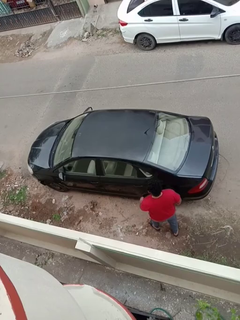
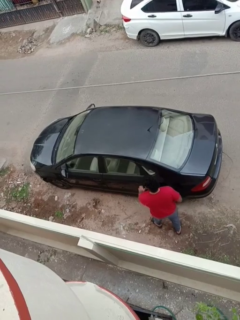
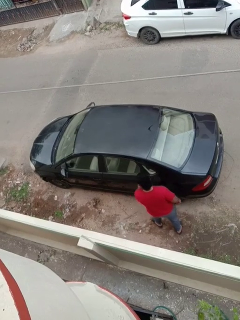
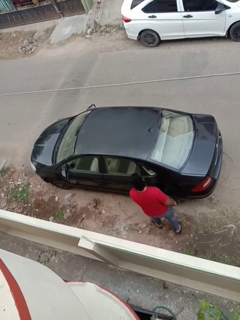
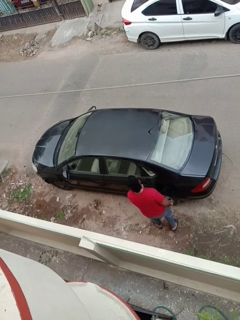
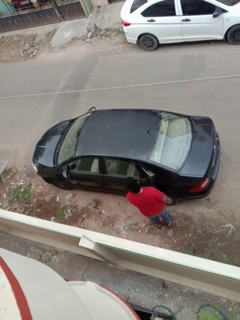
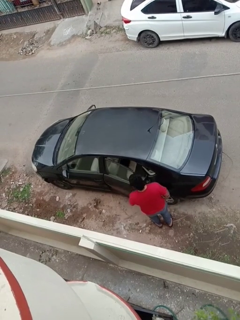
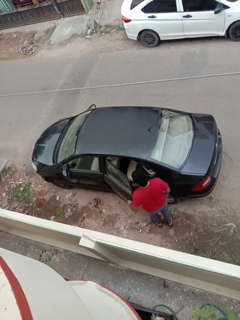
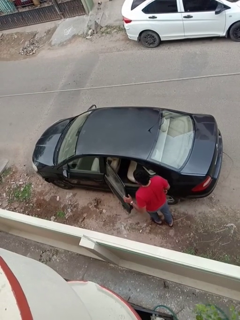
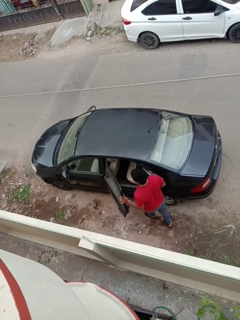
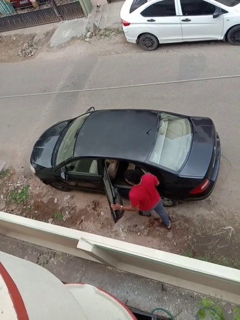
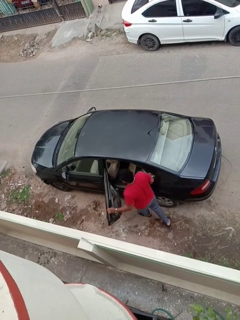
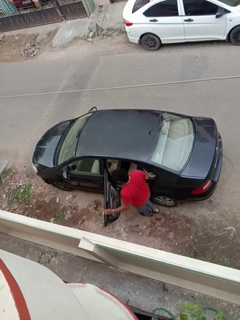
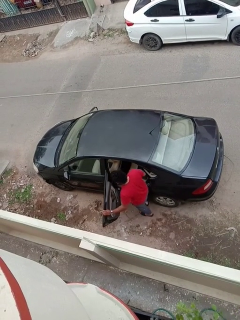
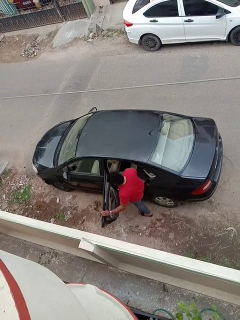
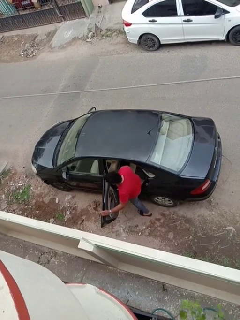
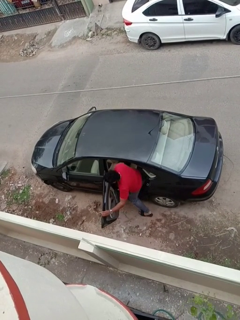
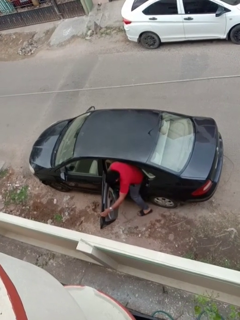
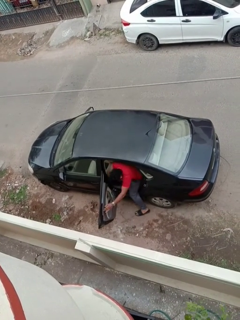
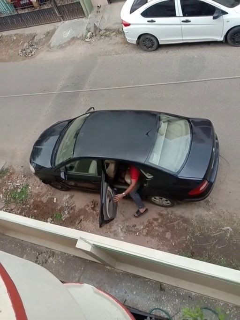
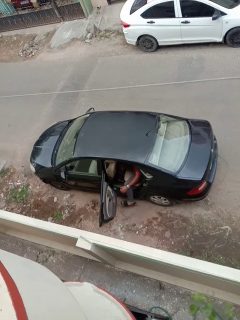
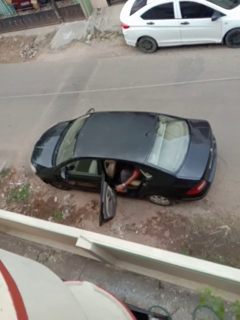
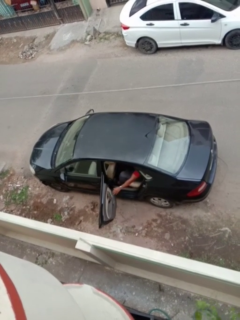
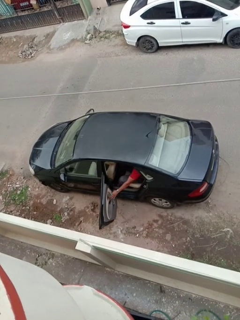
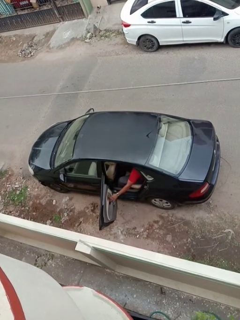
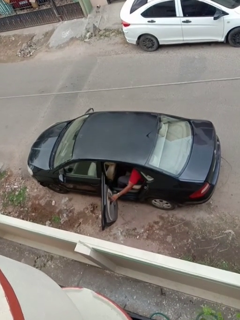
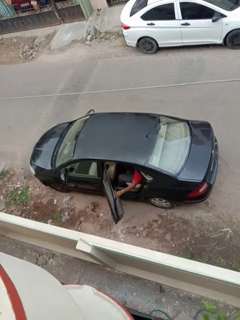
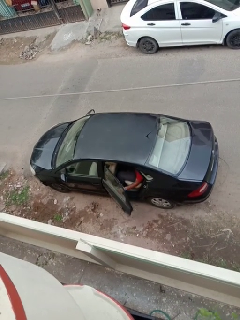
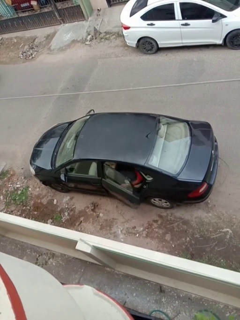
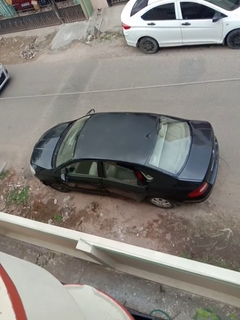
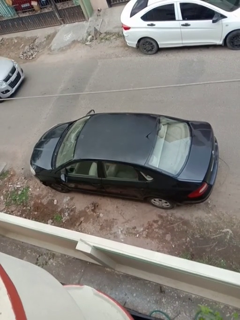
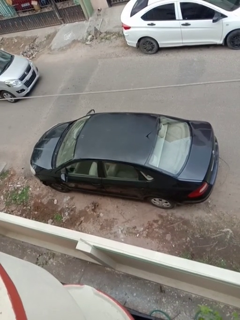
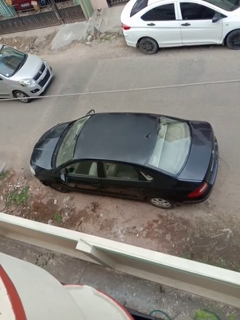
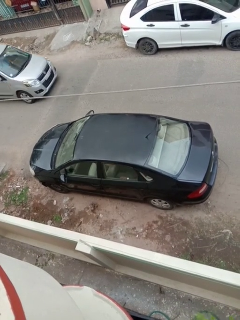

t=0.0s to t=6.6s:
car picks up person

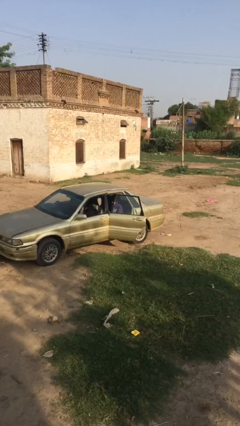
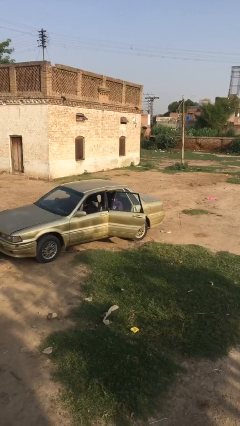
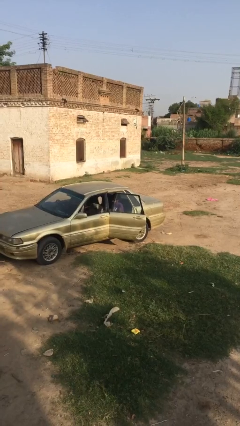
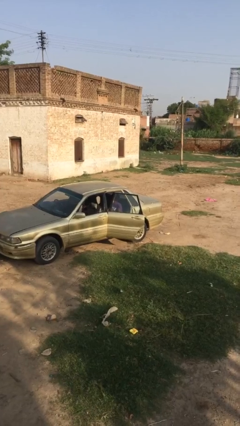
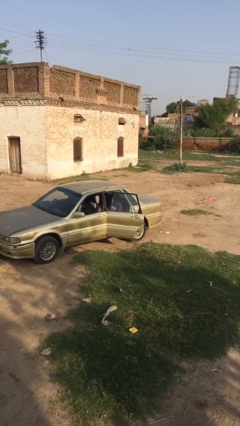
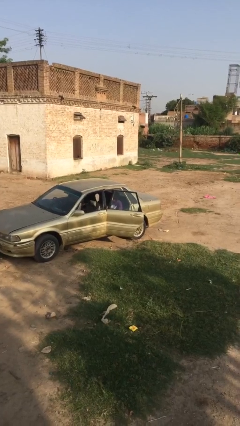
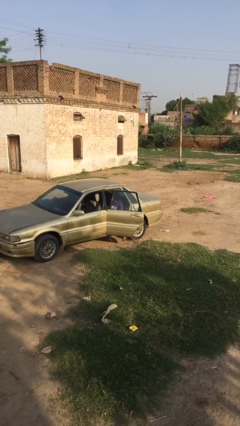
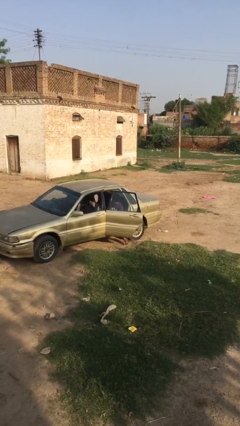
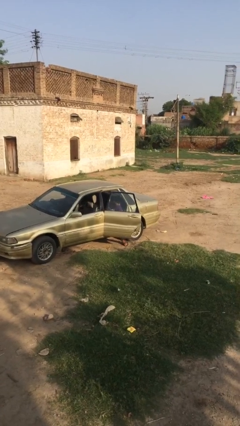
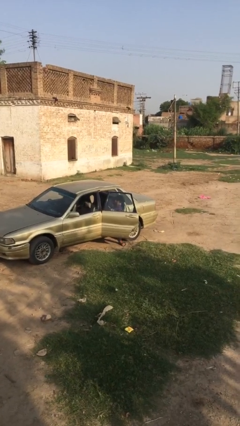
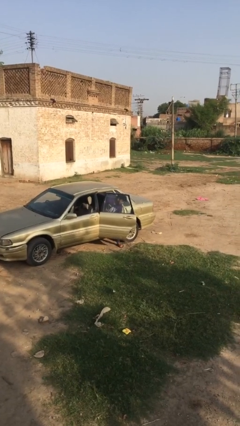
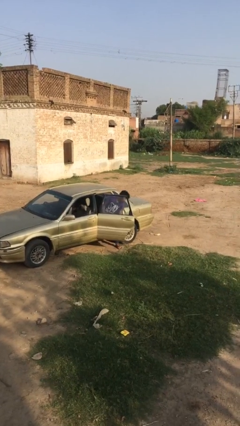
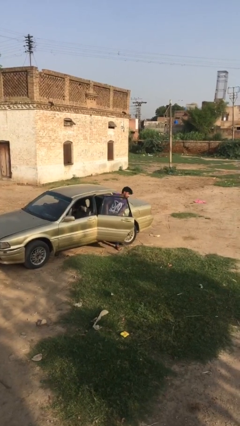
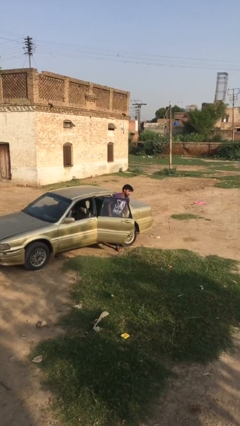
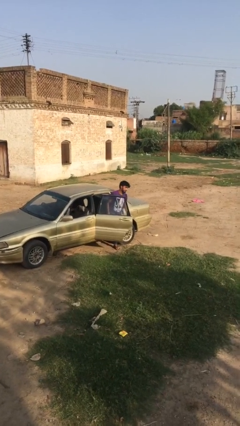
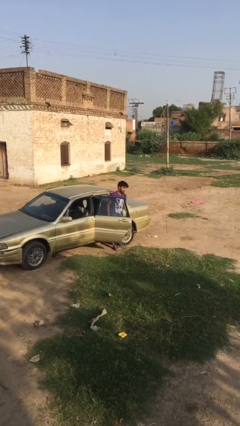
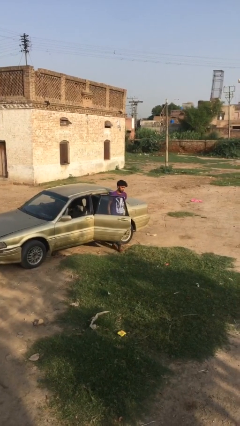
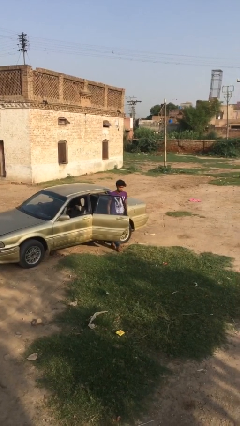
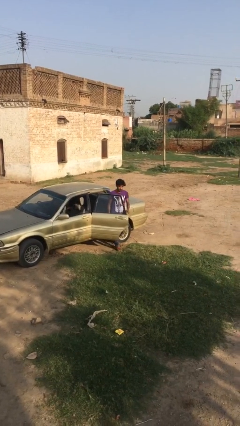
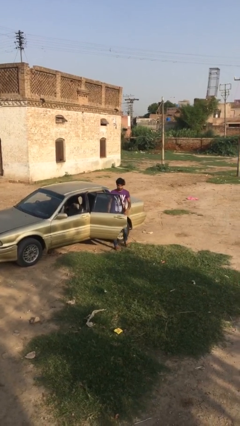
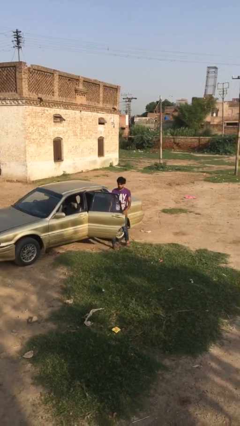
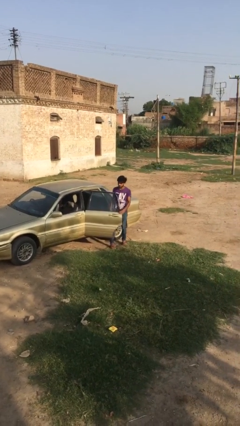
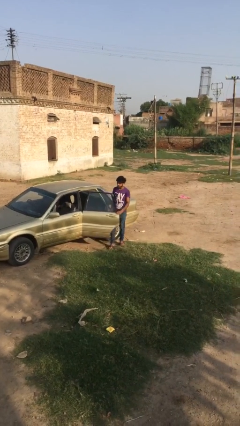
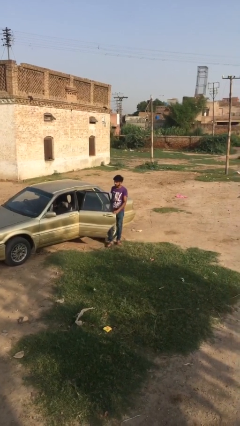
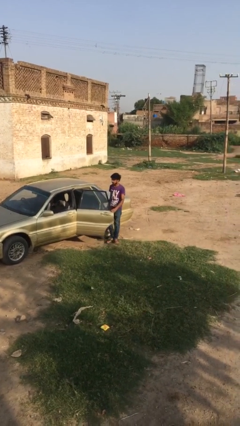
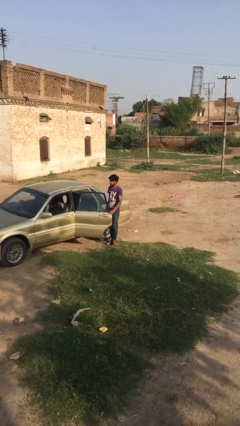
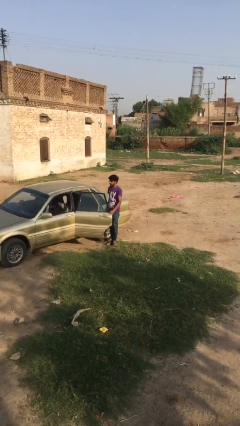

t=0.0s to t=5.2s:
person exits car

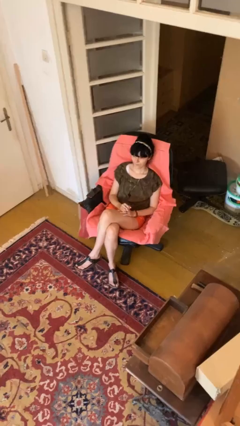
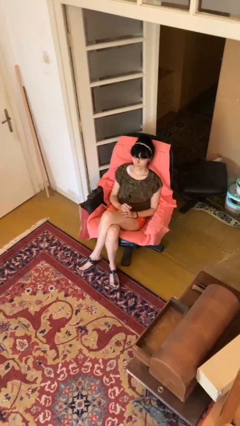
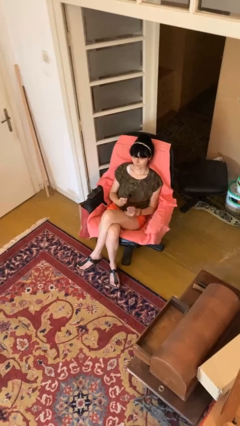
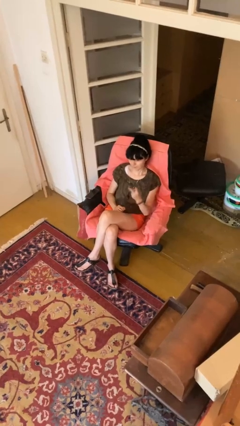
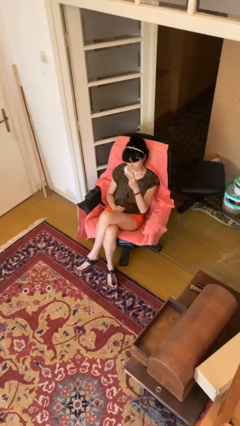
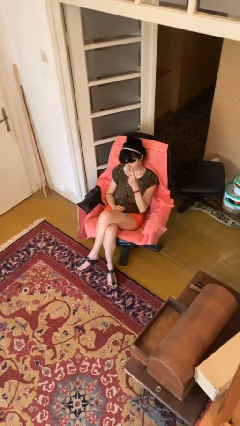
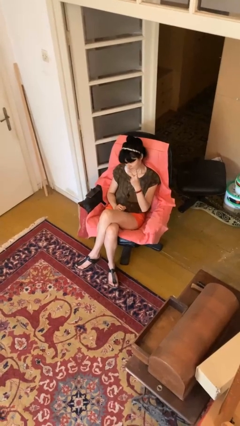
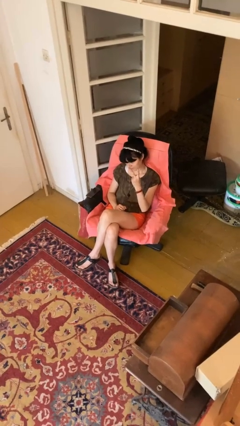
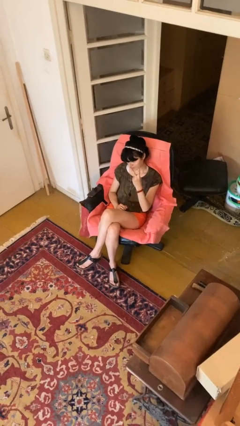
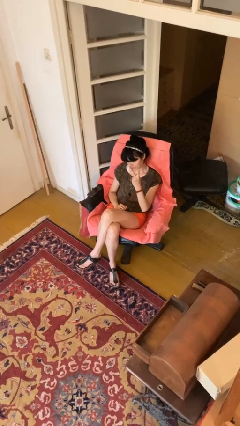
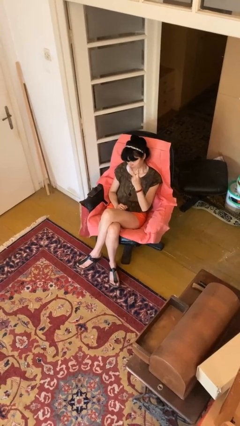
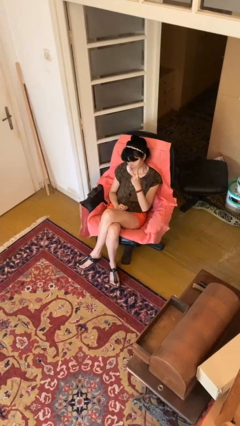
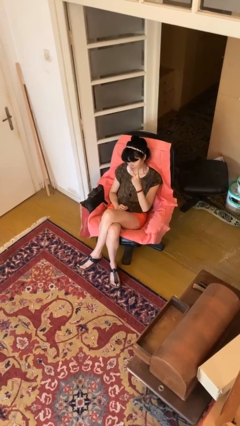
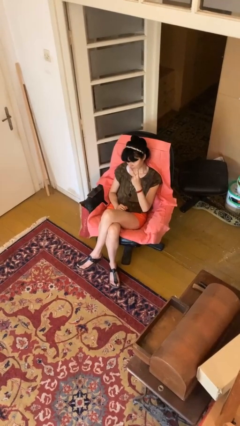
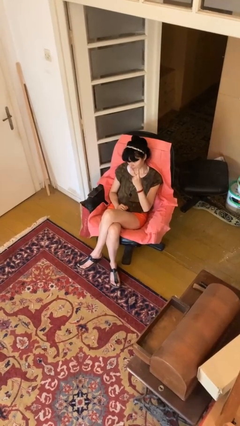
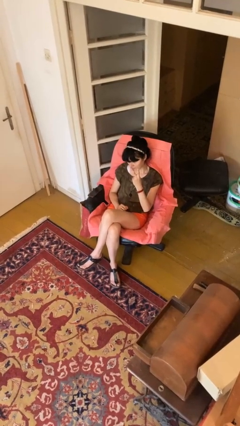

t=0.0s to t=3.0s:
person gestures peace

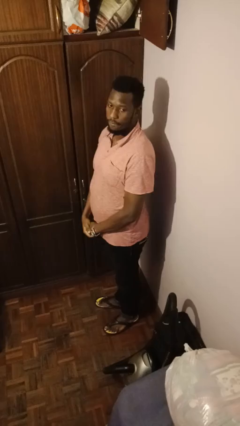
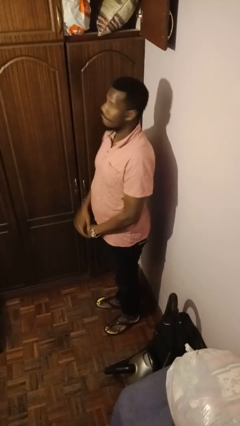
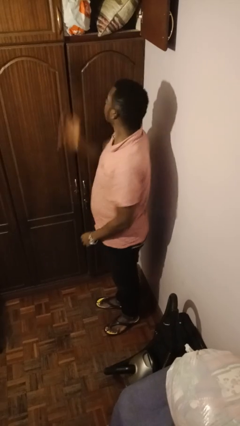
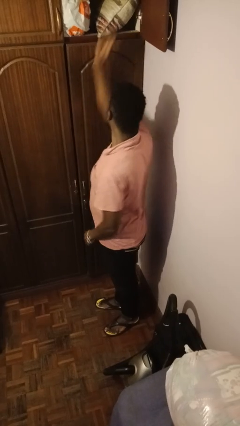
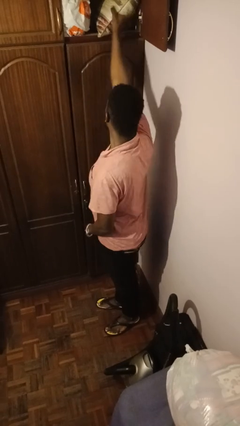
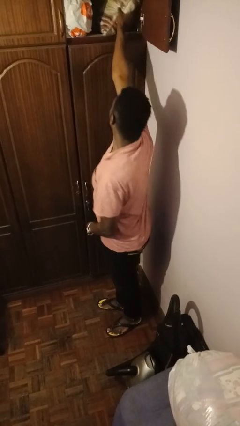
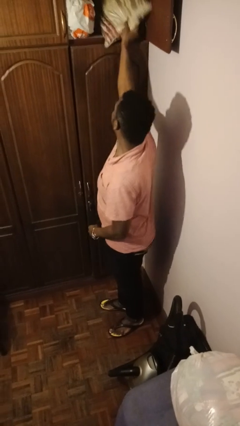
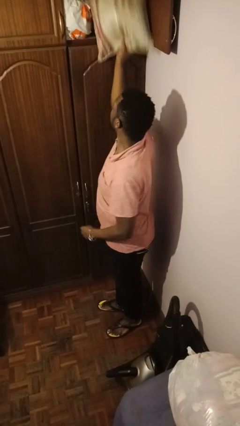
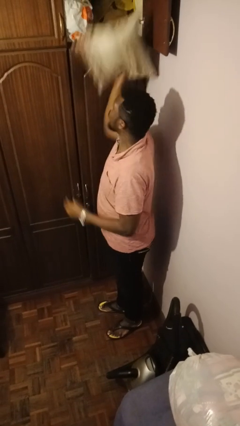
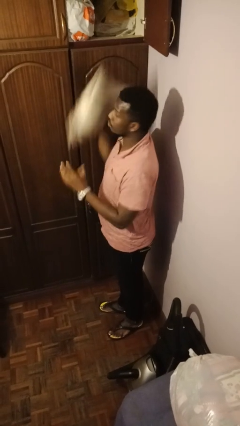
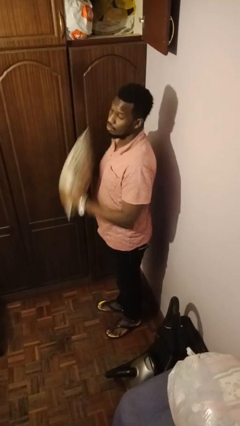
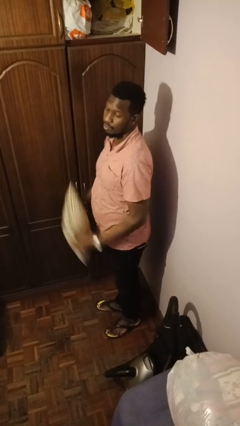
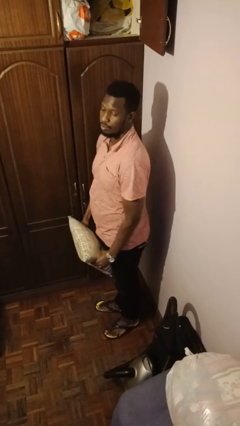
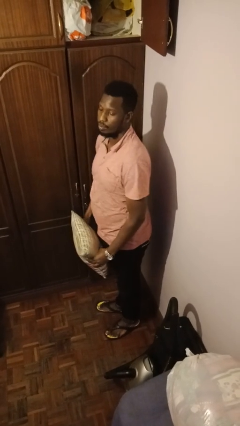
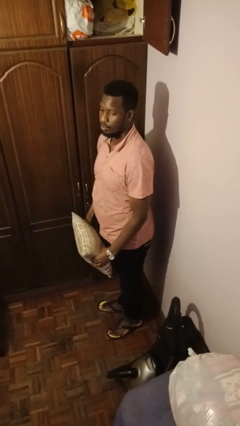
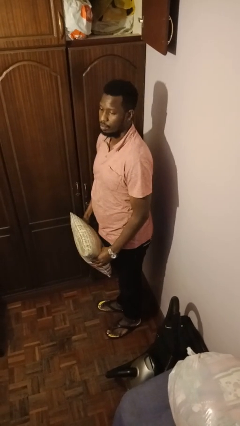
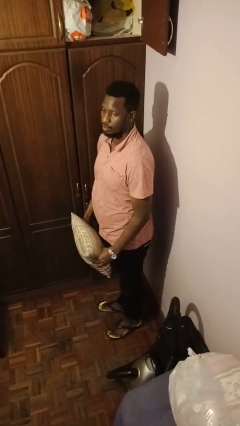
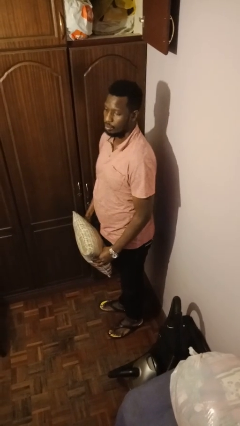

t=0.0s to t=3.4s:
person picks up object from shelf

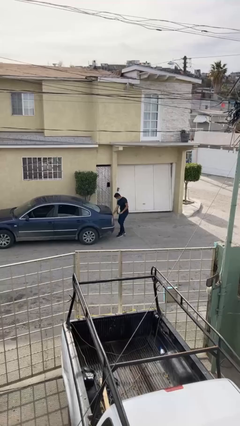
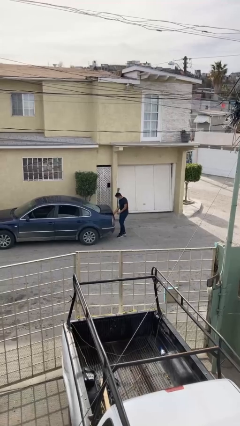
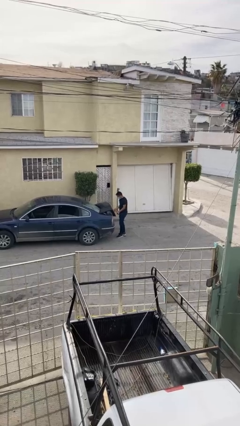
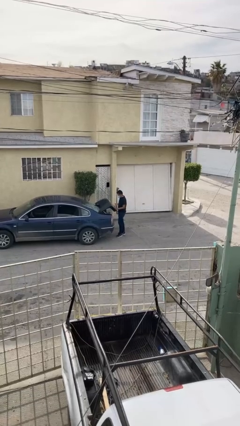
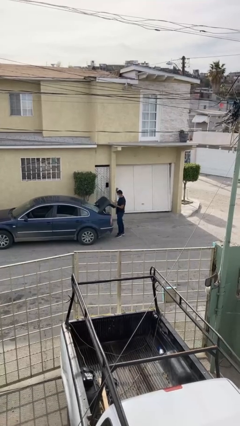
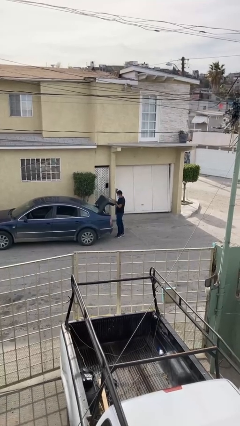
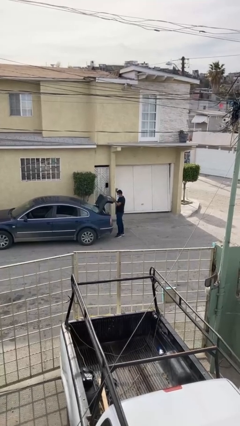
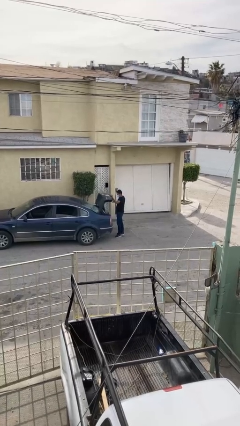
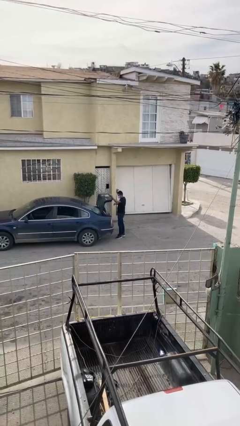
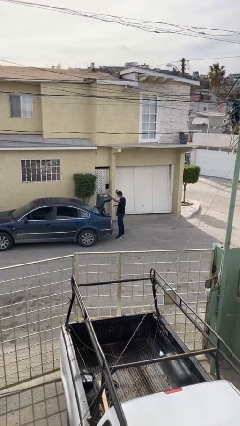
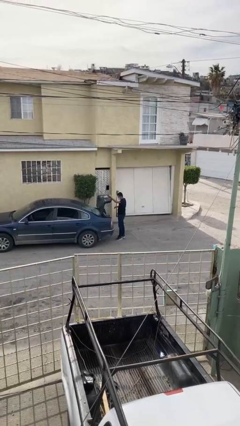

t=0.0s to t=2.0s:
person opens car trunk
